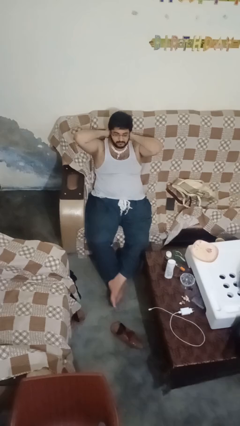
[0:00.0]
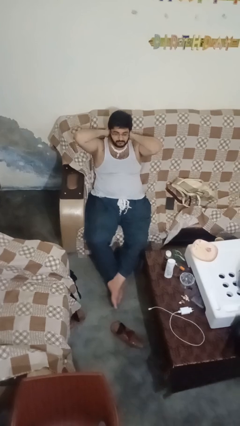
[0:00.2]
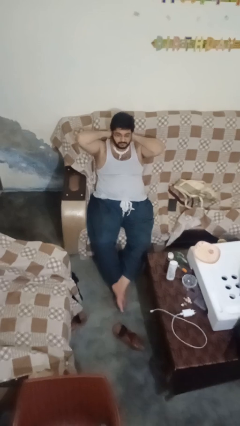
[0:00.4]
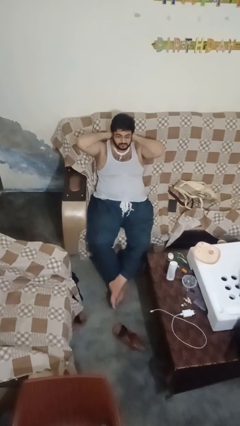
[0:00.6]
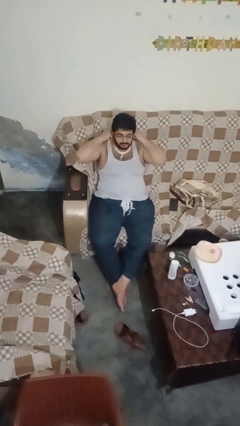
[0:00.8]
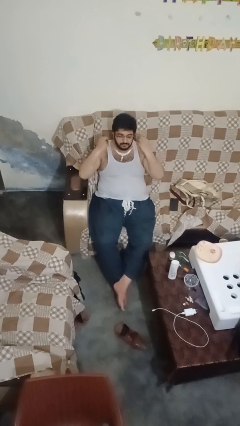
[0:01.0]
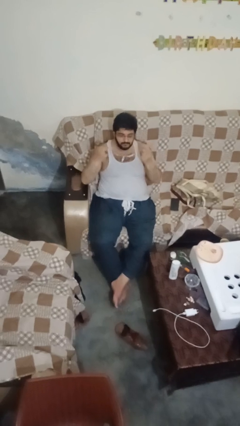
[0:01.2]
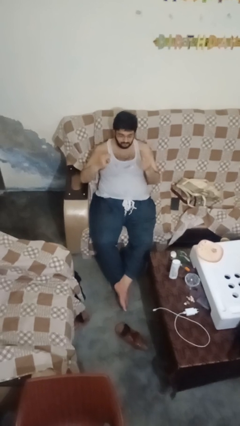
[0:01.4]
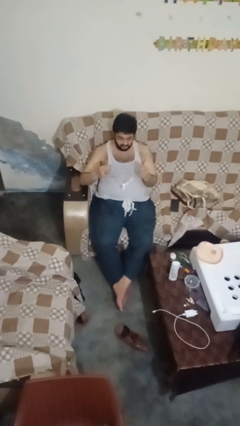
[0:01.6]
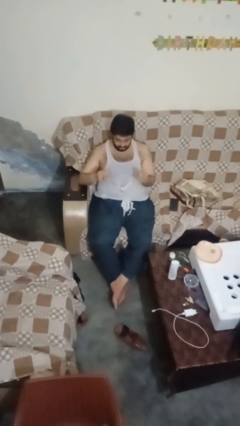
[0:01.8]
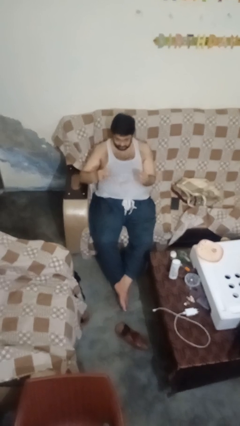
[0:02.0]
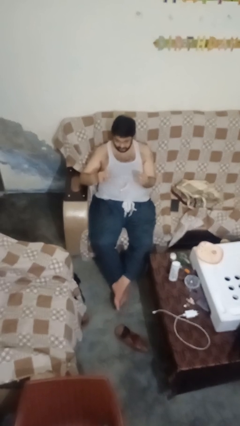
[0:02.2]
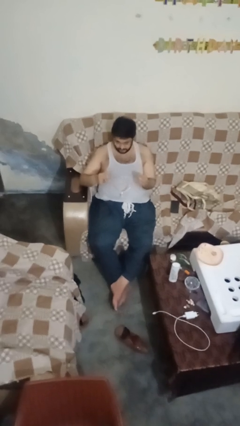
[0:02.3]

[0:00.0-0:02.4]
person takes off necklace

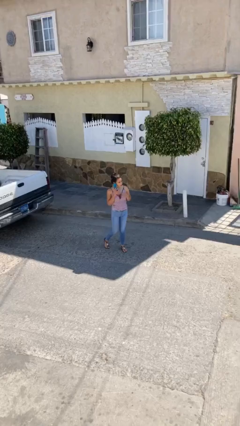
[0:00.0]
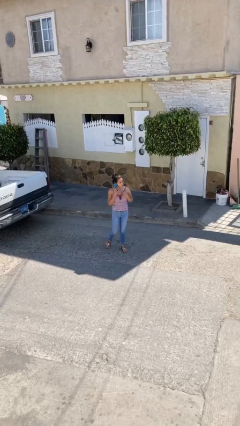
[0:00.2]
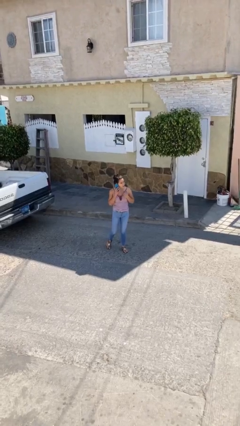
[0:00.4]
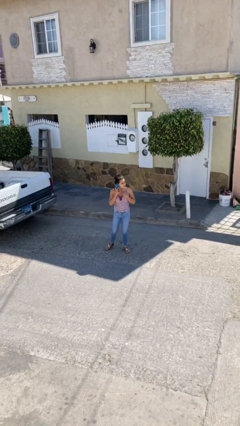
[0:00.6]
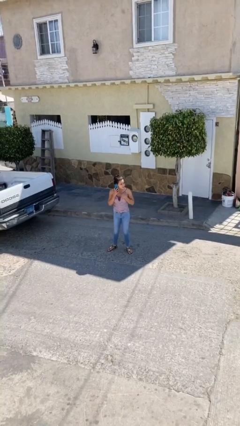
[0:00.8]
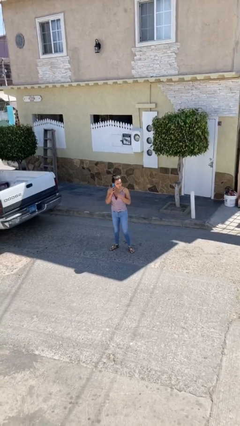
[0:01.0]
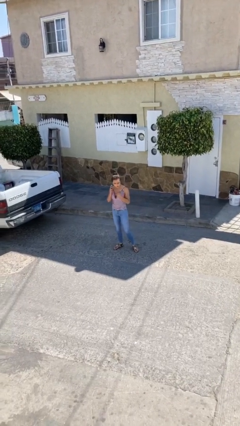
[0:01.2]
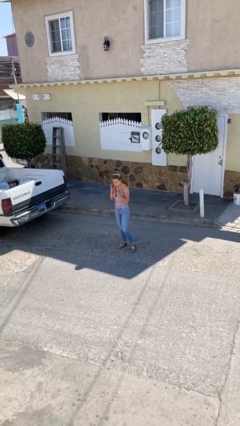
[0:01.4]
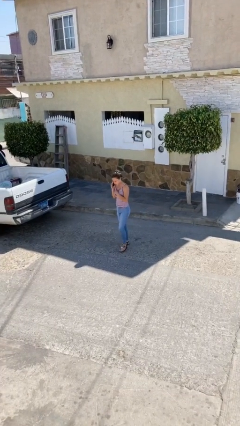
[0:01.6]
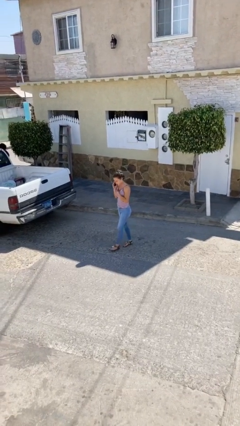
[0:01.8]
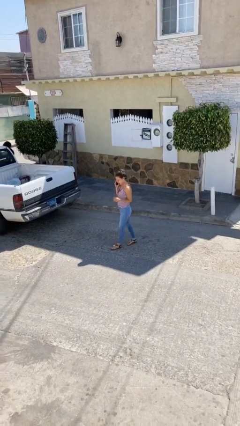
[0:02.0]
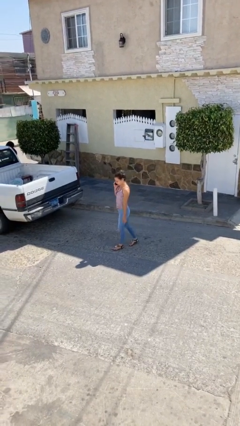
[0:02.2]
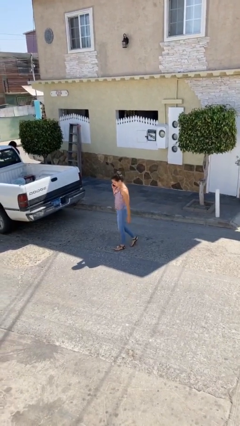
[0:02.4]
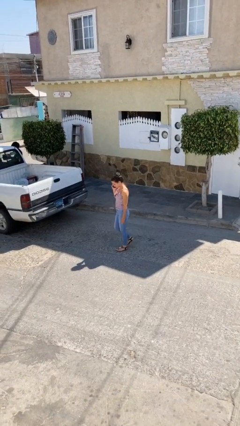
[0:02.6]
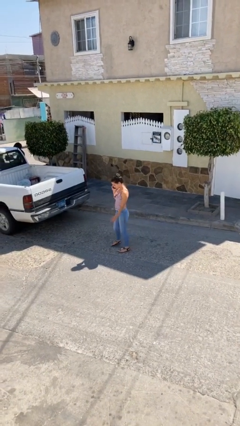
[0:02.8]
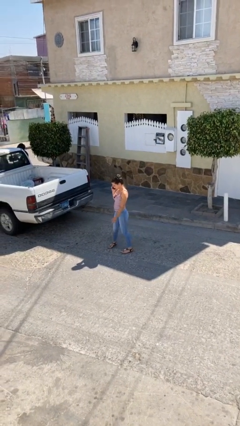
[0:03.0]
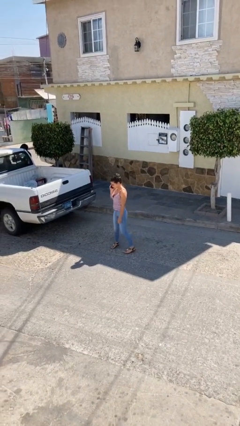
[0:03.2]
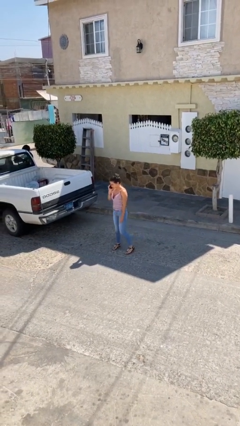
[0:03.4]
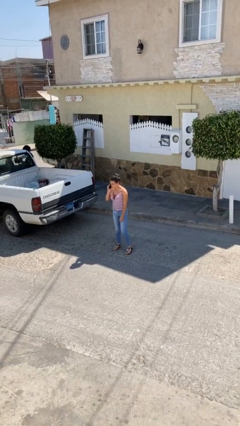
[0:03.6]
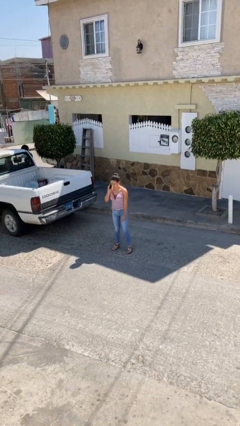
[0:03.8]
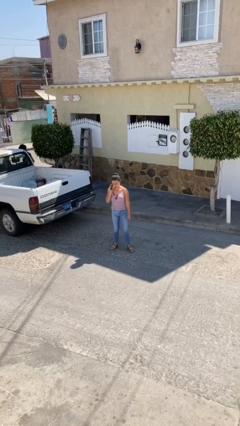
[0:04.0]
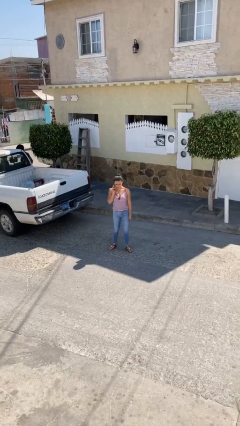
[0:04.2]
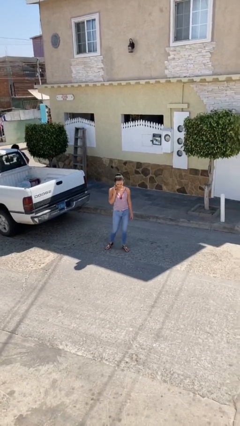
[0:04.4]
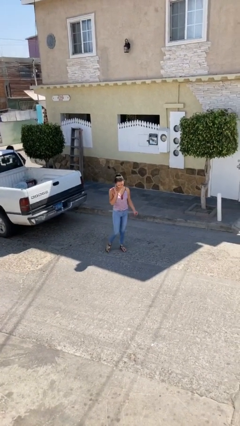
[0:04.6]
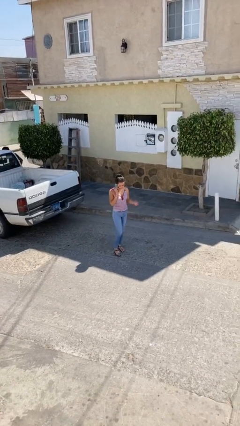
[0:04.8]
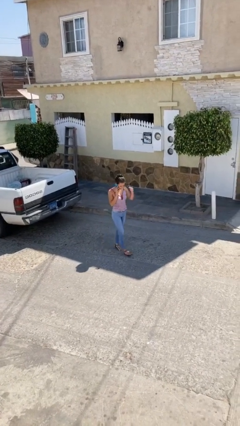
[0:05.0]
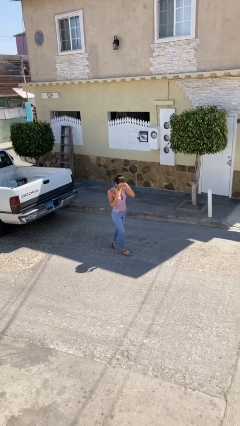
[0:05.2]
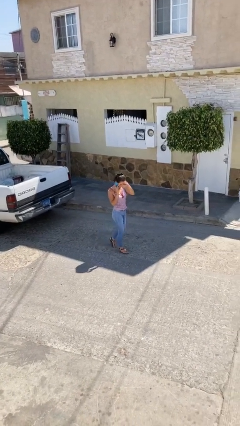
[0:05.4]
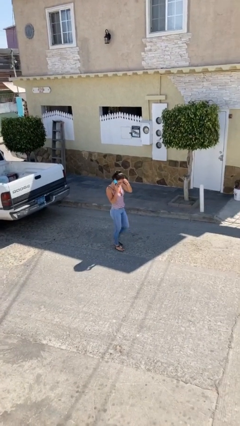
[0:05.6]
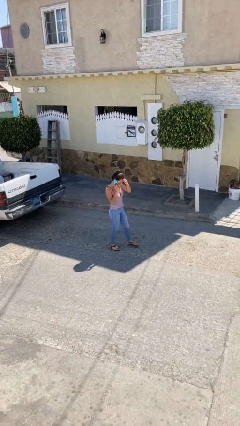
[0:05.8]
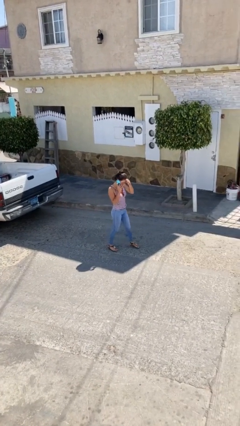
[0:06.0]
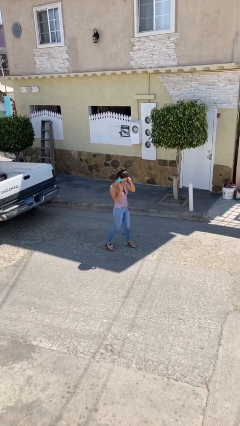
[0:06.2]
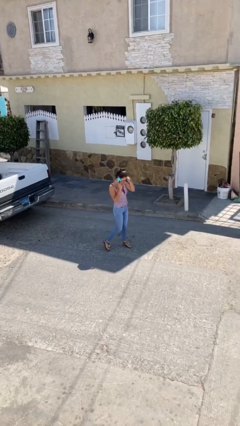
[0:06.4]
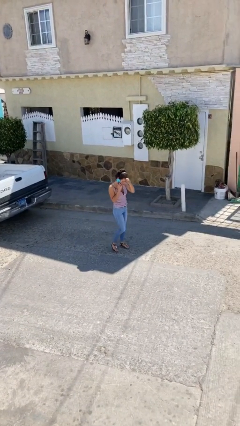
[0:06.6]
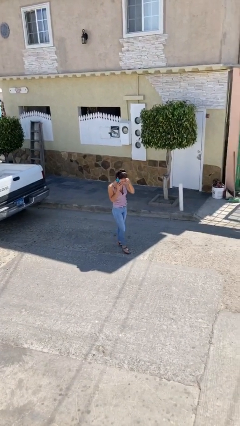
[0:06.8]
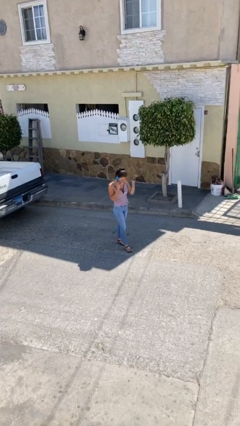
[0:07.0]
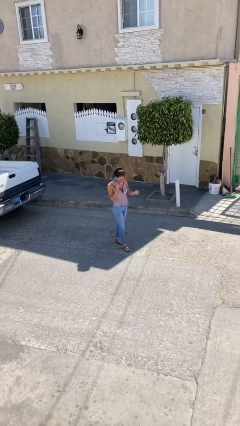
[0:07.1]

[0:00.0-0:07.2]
person talks on phone

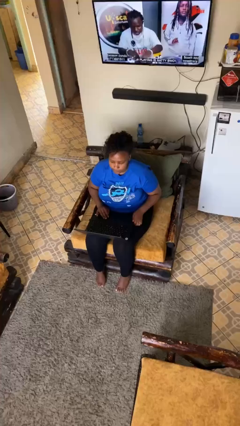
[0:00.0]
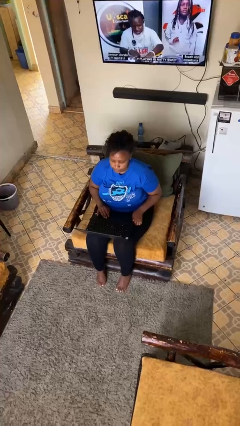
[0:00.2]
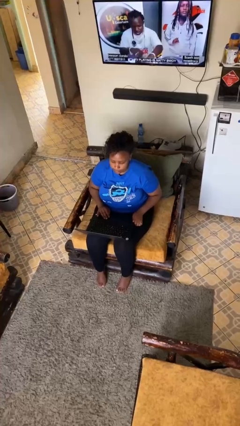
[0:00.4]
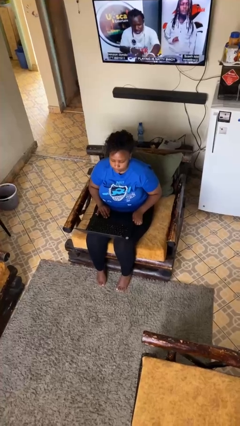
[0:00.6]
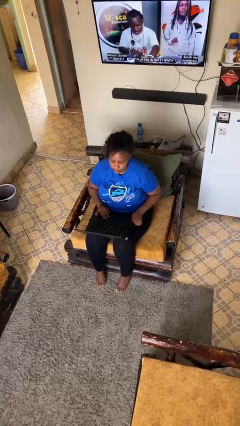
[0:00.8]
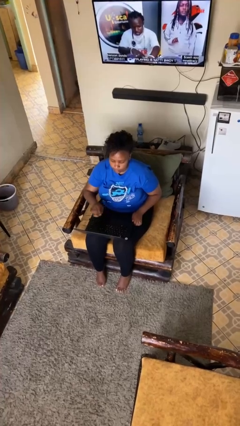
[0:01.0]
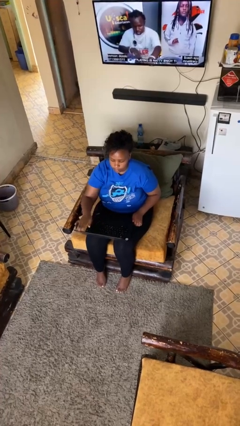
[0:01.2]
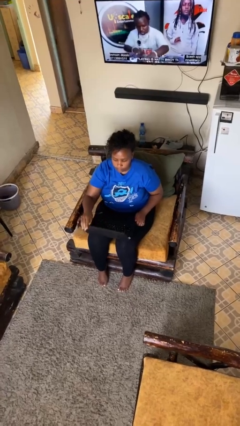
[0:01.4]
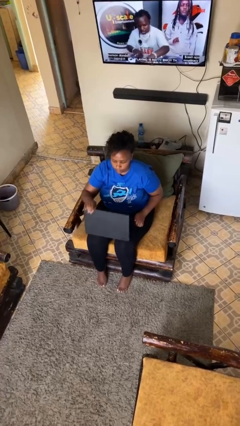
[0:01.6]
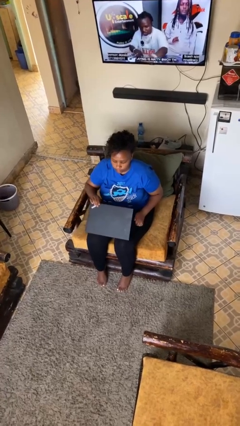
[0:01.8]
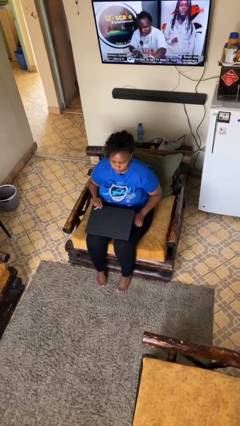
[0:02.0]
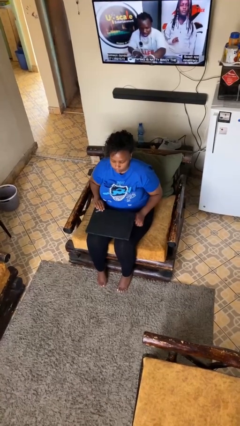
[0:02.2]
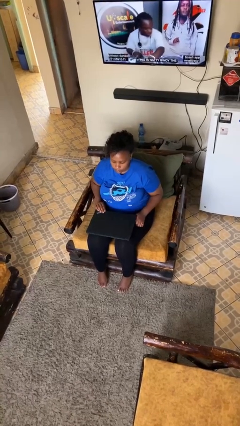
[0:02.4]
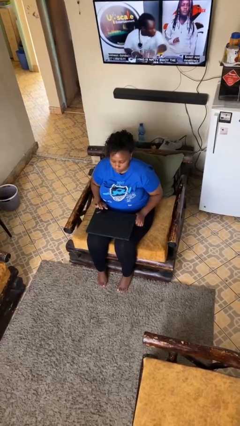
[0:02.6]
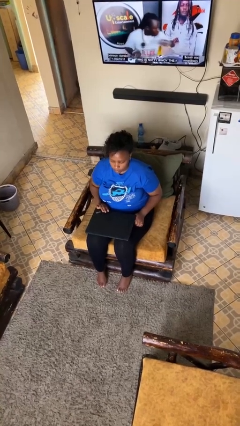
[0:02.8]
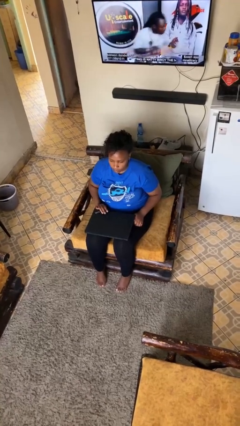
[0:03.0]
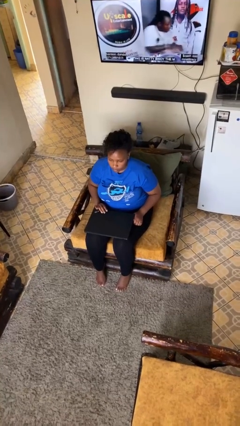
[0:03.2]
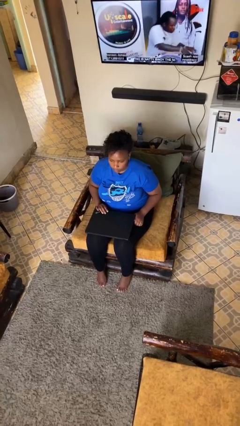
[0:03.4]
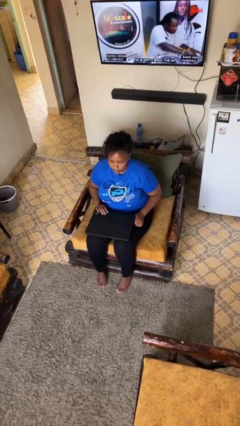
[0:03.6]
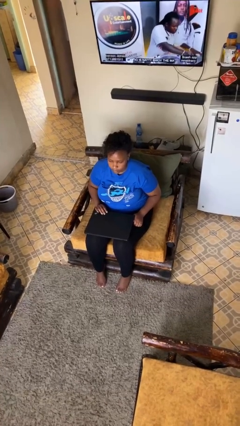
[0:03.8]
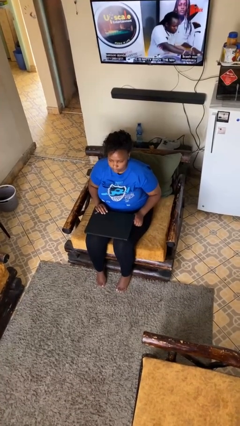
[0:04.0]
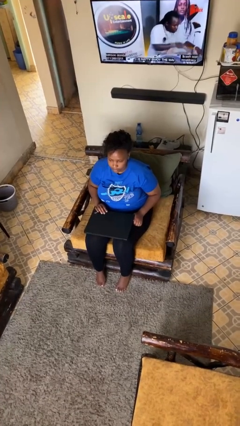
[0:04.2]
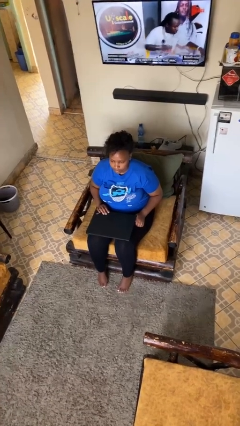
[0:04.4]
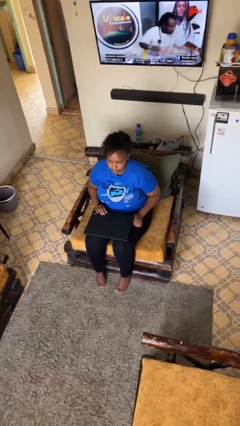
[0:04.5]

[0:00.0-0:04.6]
person closes laptop

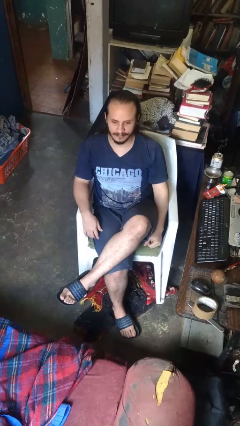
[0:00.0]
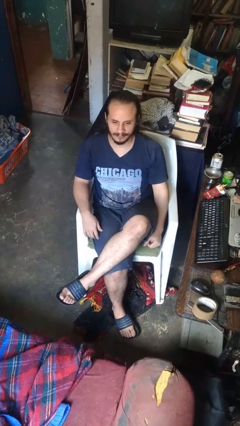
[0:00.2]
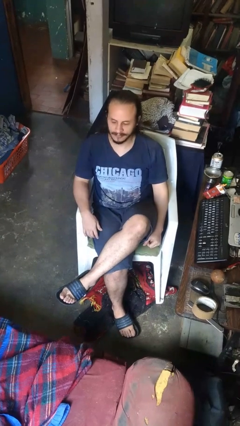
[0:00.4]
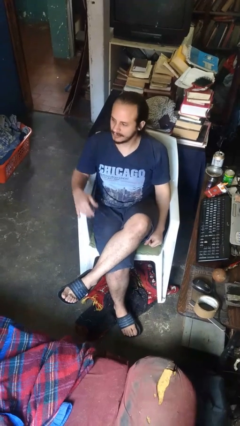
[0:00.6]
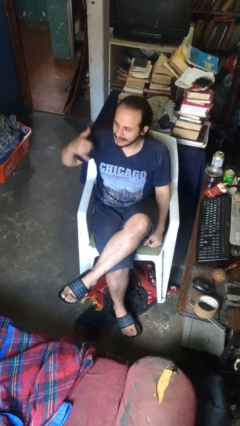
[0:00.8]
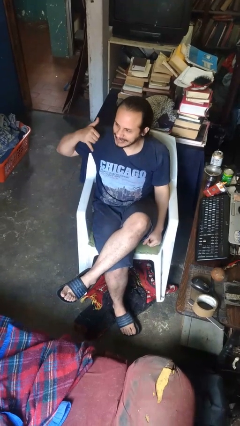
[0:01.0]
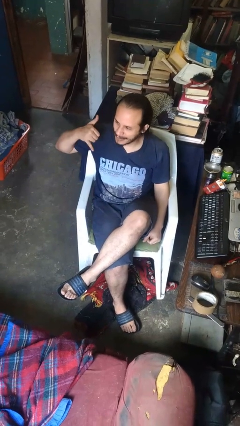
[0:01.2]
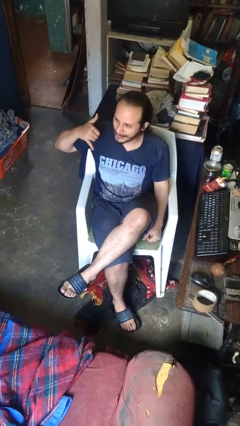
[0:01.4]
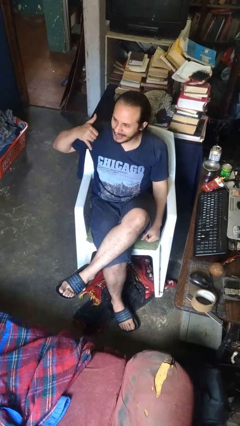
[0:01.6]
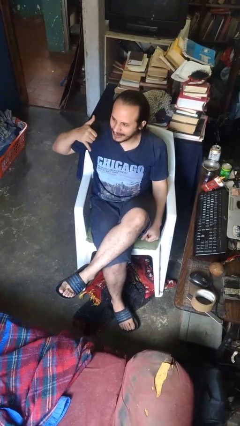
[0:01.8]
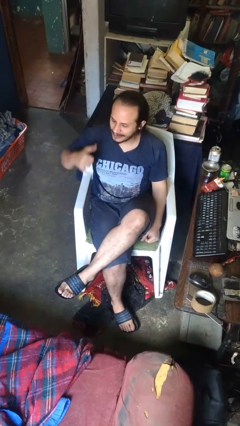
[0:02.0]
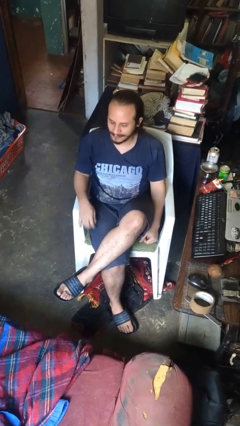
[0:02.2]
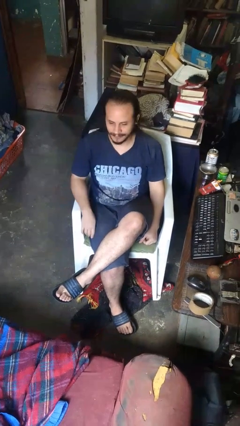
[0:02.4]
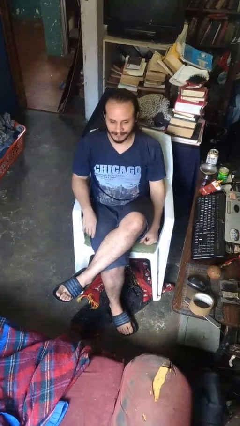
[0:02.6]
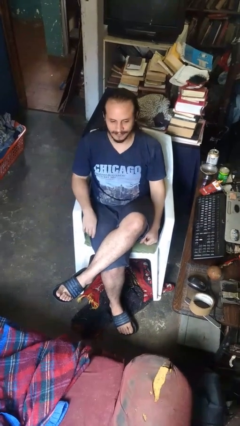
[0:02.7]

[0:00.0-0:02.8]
person gestures call me

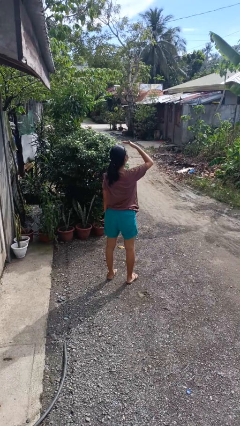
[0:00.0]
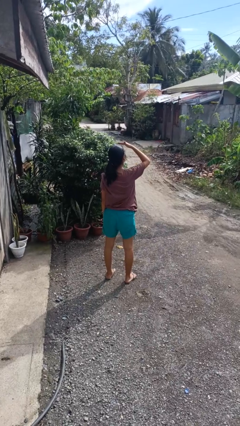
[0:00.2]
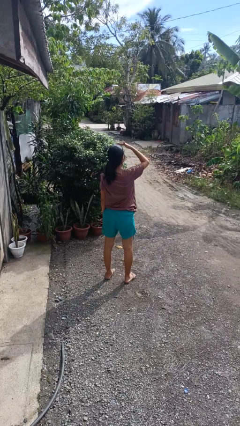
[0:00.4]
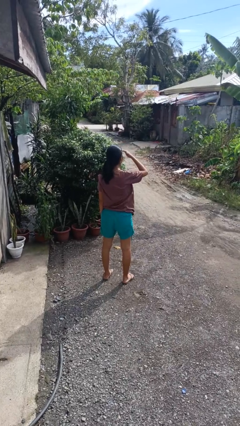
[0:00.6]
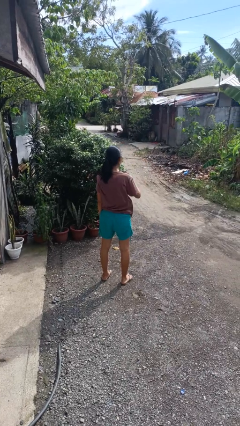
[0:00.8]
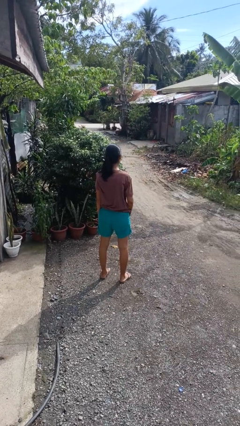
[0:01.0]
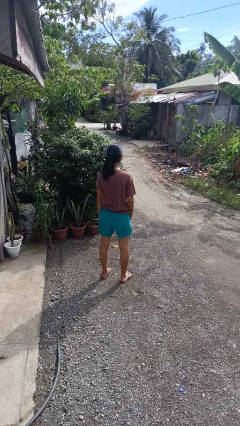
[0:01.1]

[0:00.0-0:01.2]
person shades eyes
